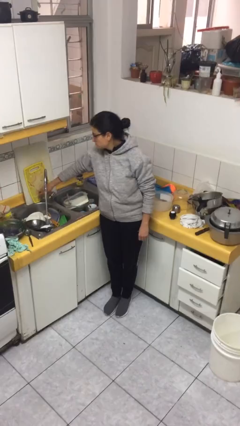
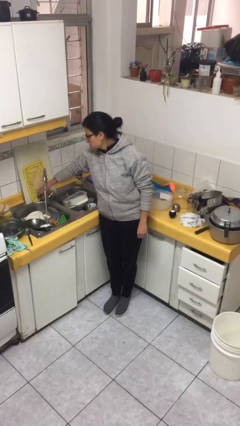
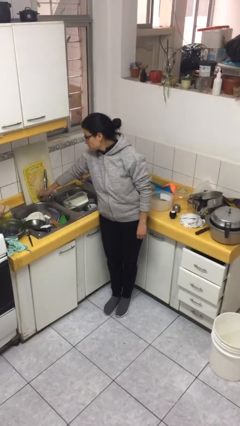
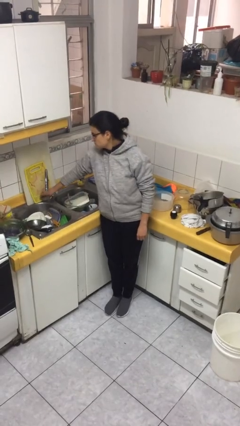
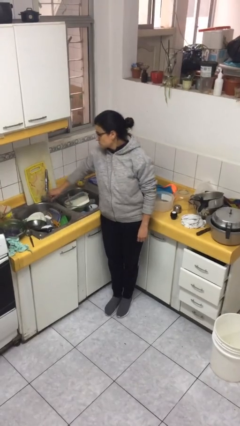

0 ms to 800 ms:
person turns off faucet

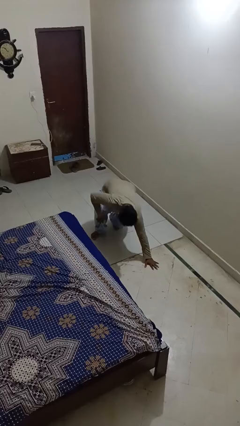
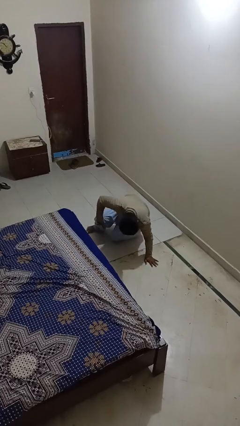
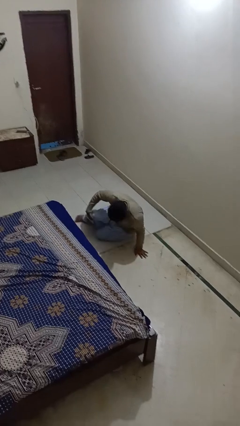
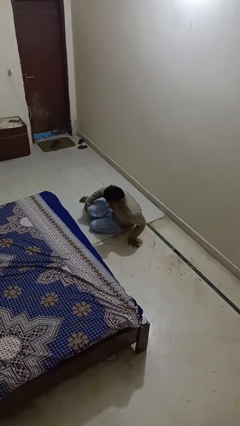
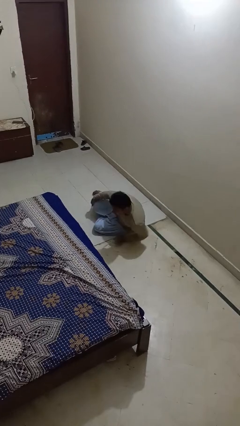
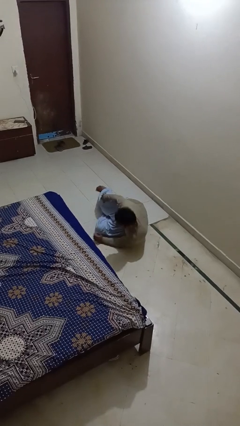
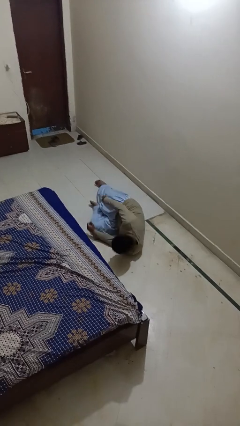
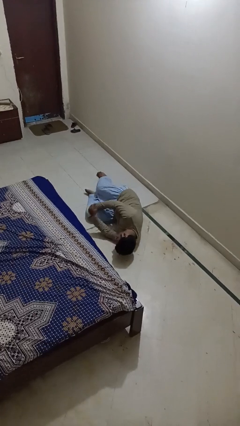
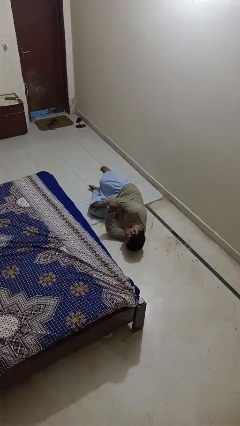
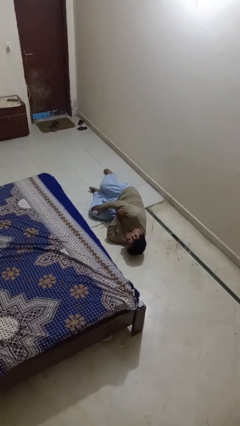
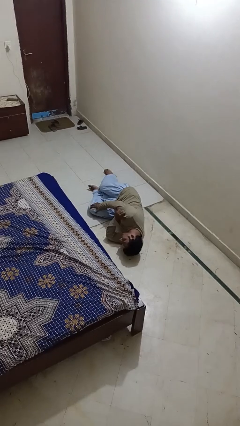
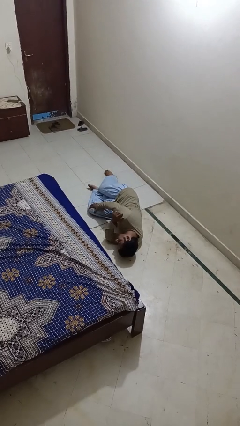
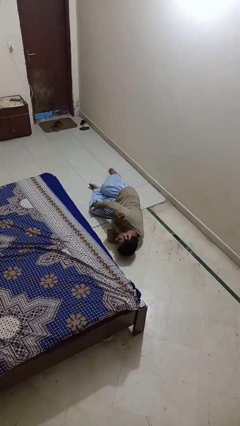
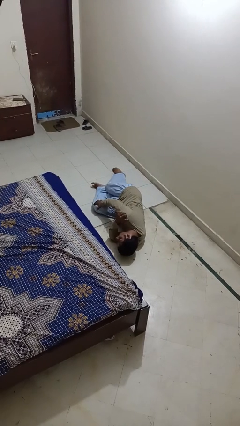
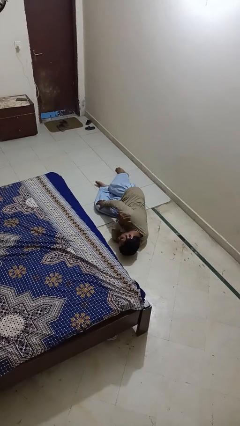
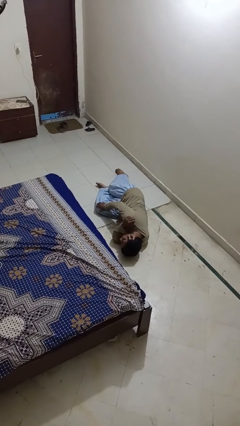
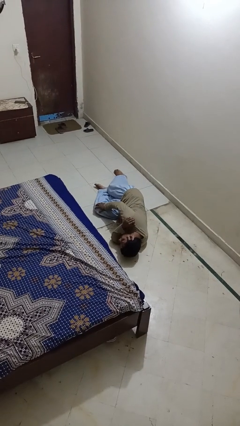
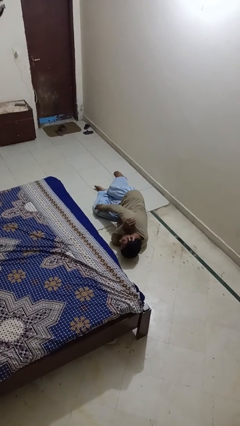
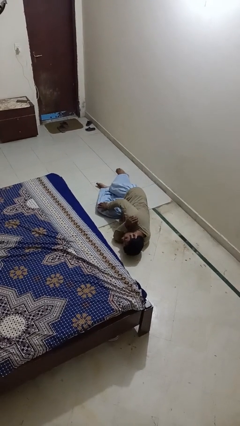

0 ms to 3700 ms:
person lies down on floor

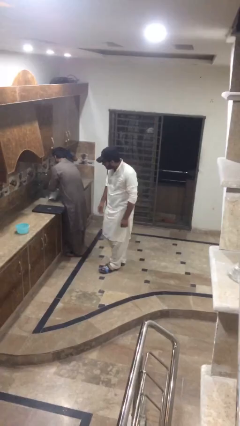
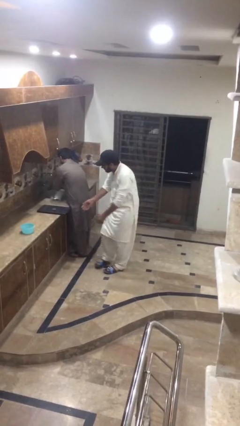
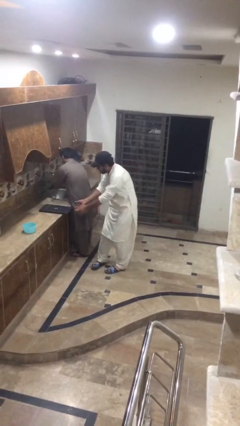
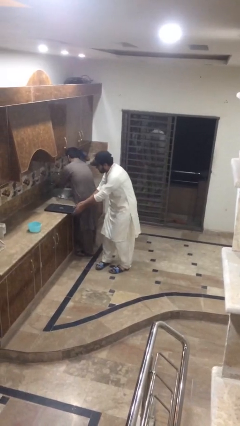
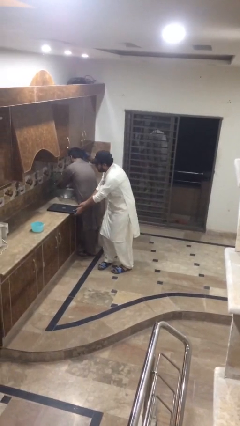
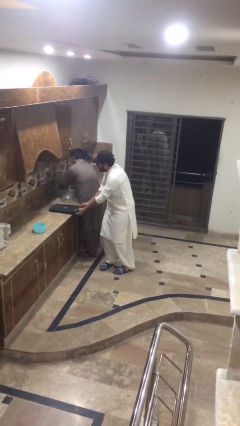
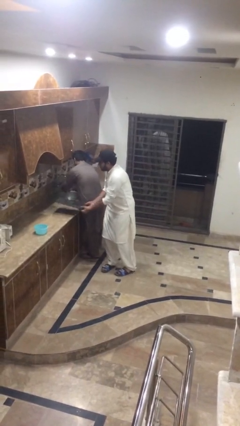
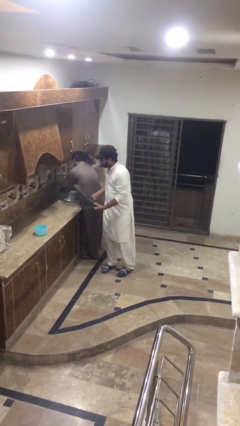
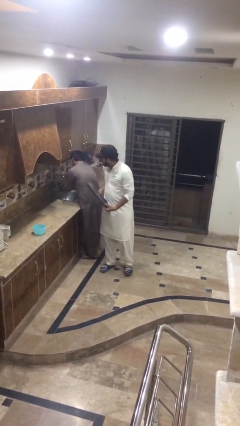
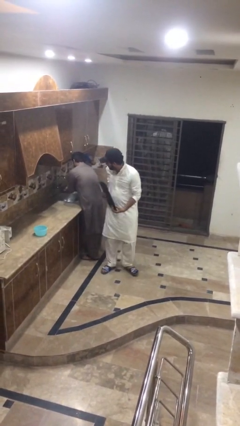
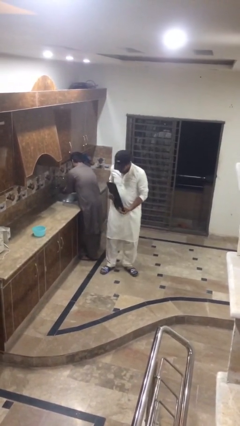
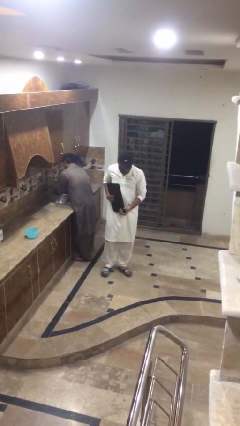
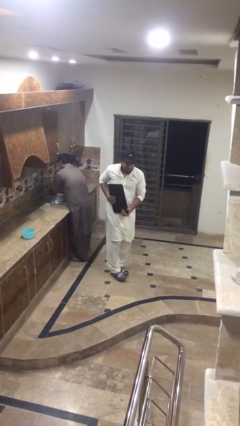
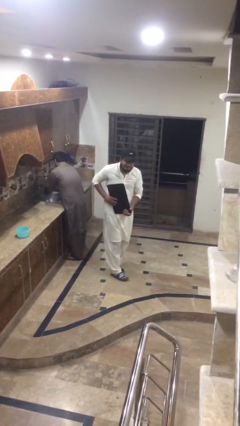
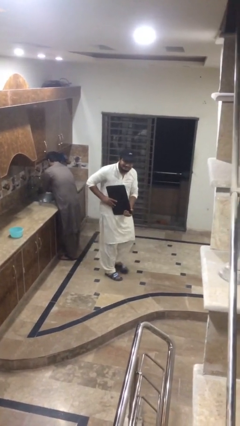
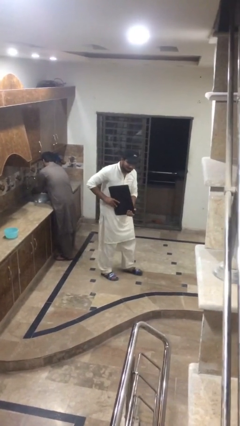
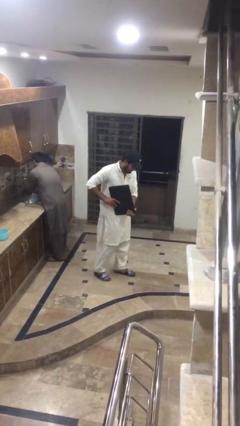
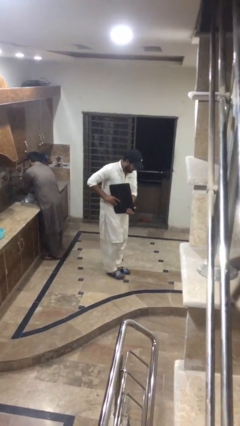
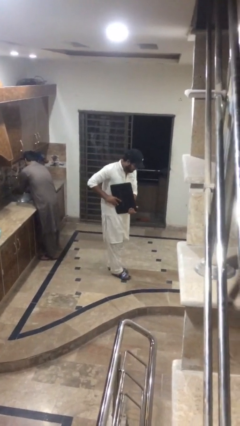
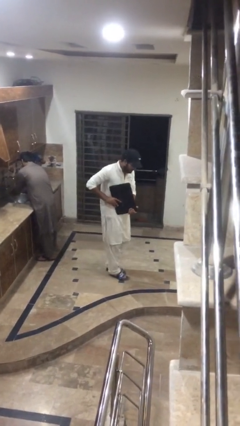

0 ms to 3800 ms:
person steals object from person

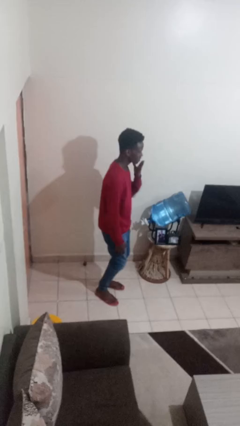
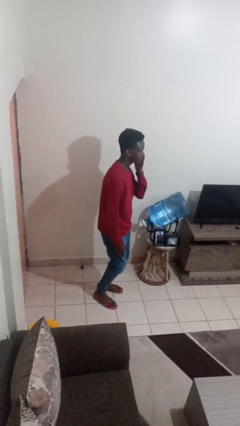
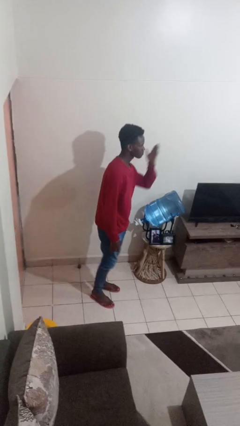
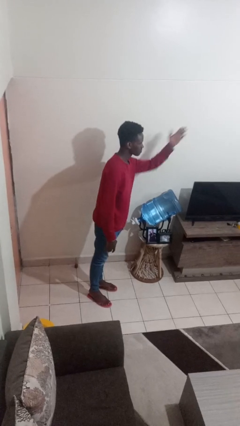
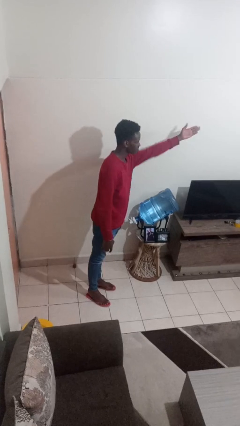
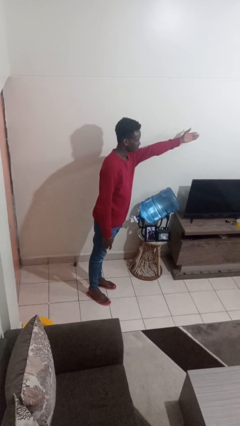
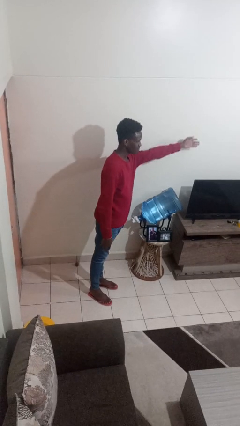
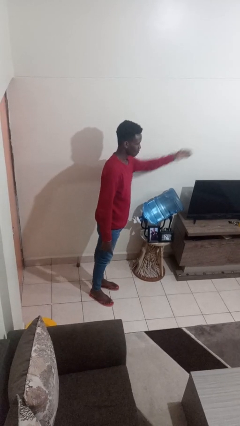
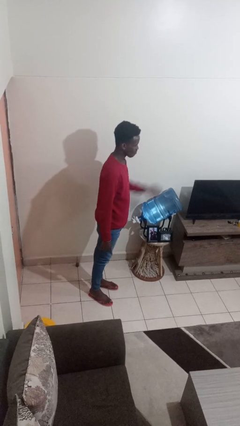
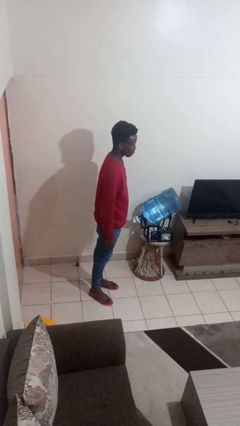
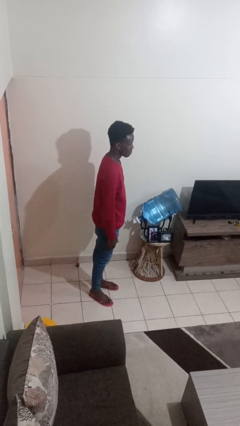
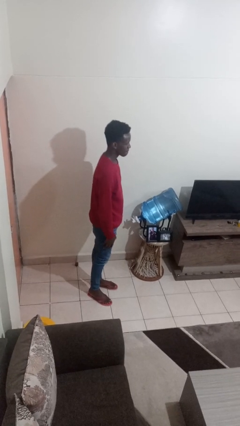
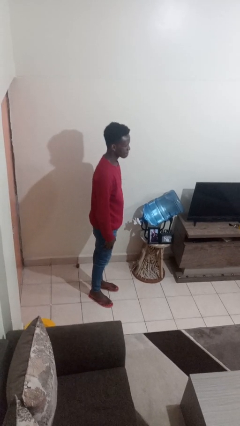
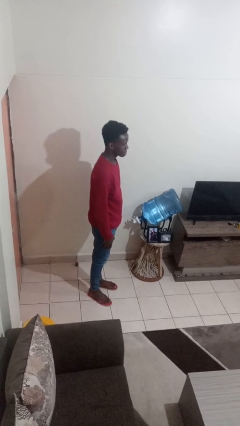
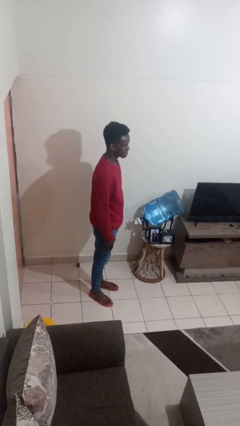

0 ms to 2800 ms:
person gestures blow kiss

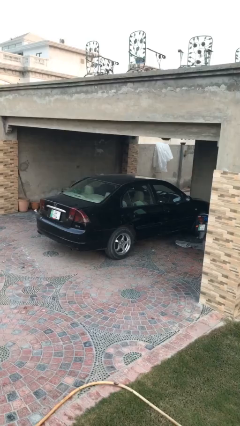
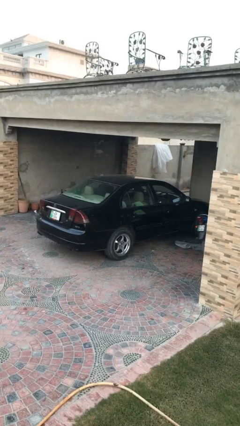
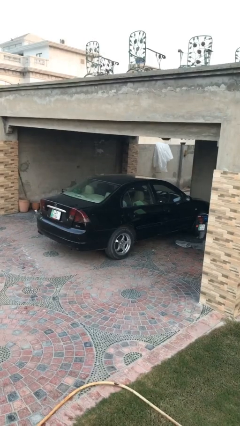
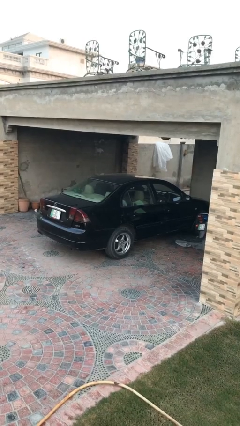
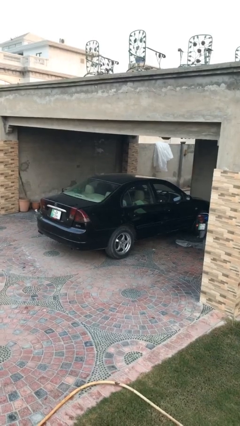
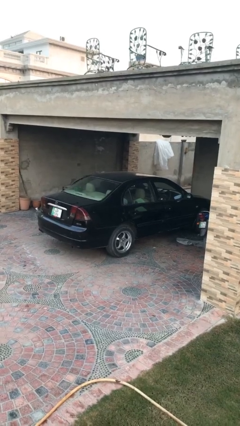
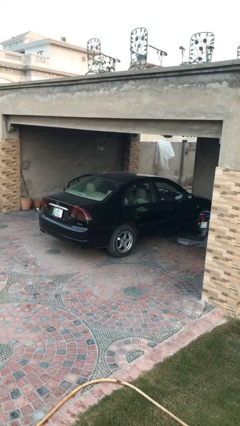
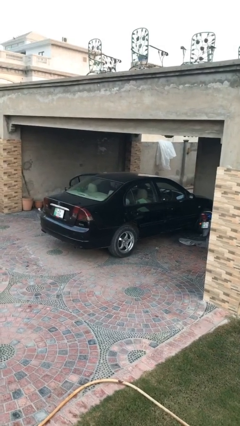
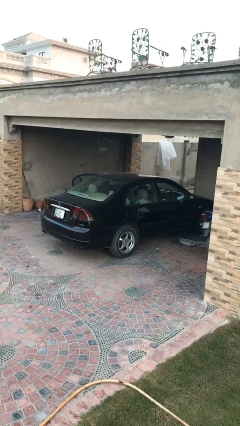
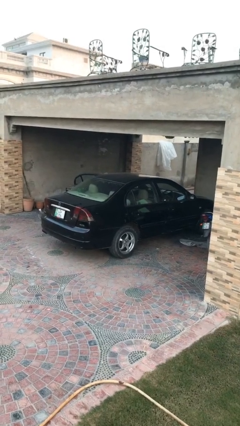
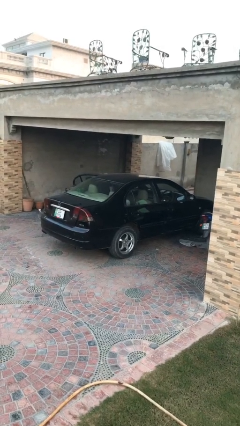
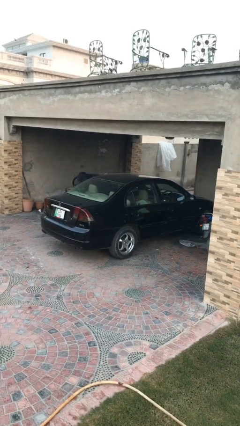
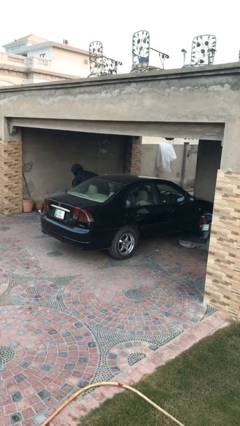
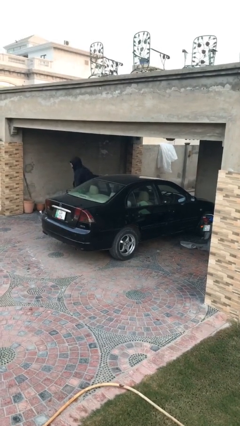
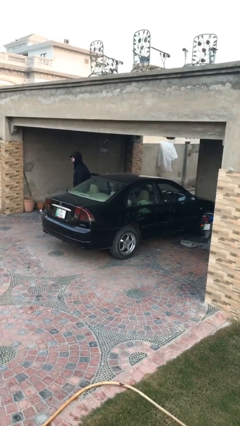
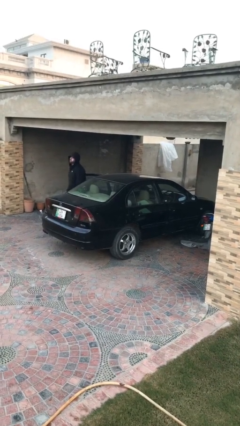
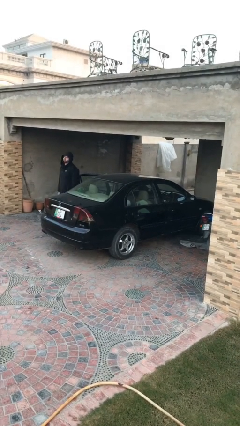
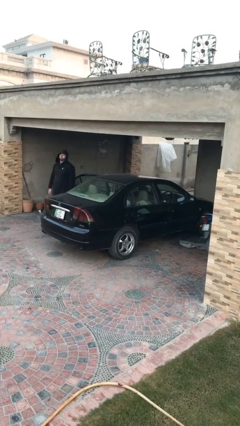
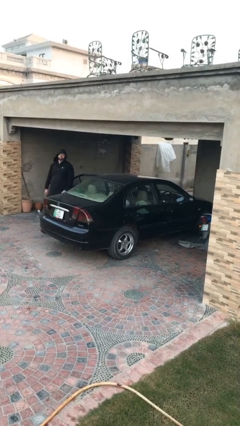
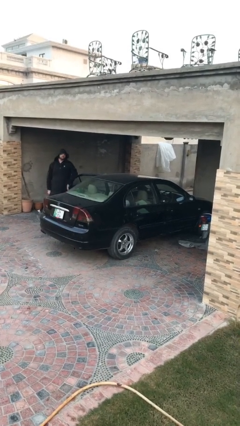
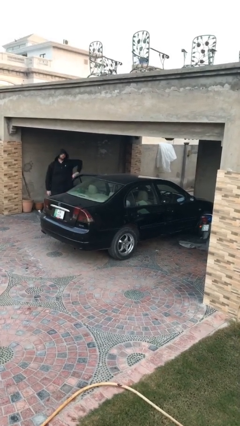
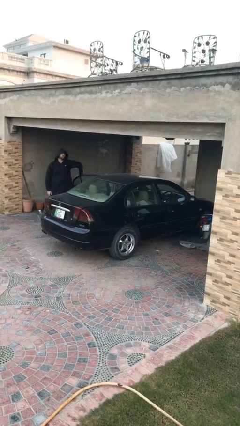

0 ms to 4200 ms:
car drops off person

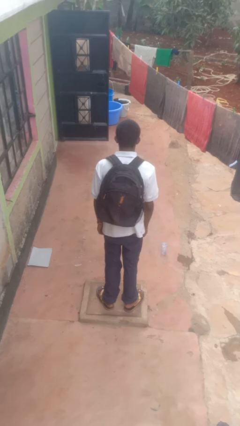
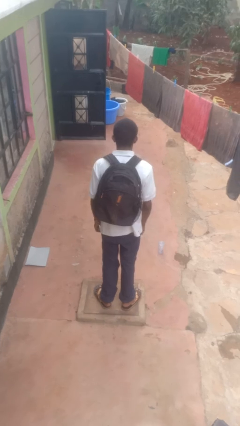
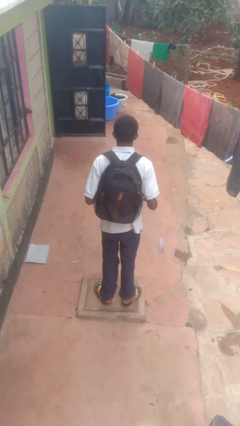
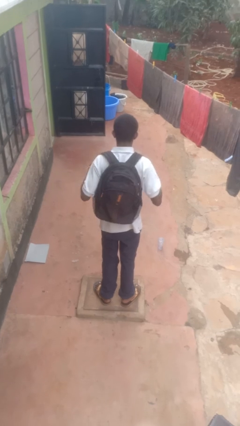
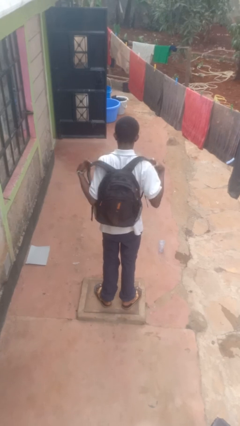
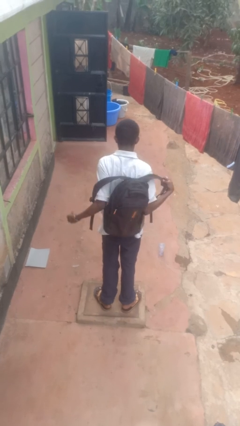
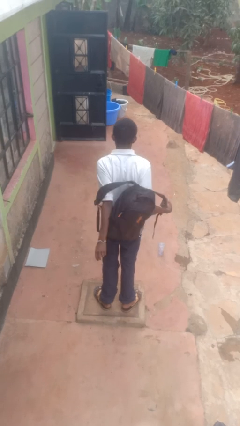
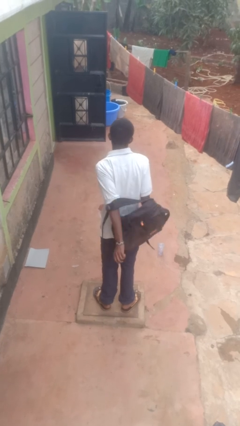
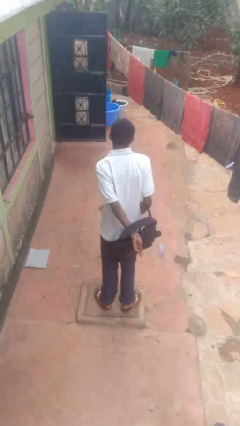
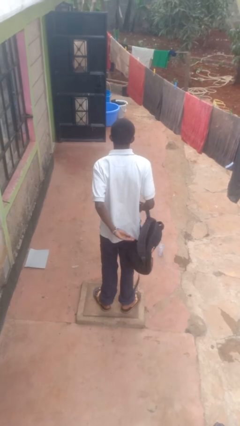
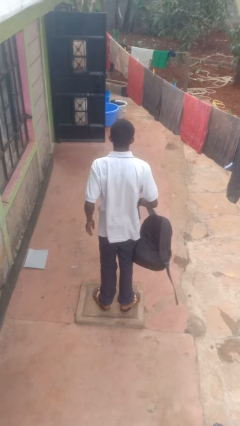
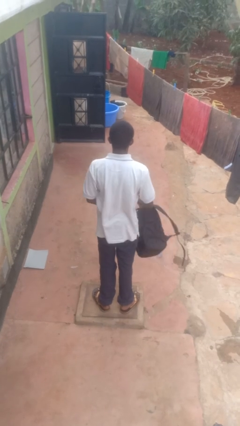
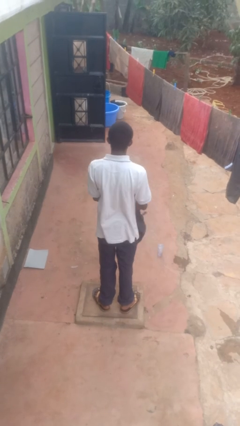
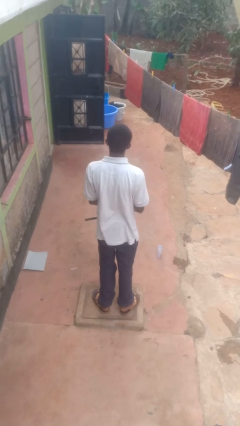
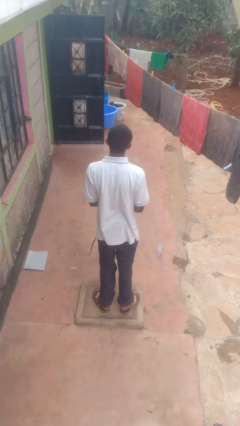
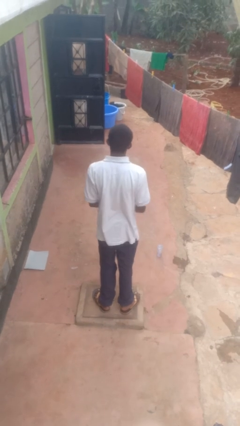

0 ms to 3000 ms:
person takes off backpack
